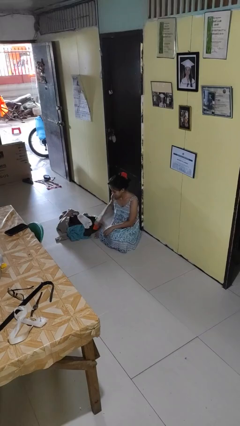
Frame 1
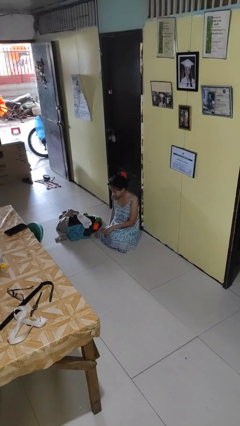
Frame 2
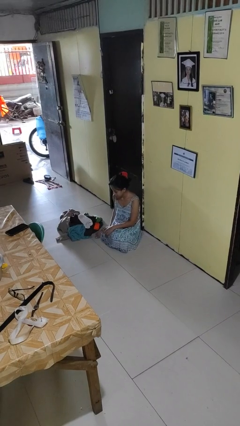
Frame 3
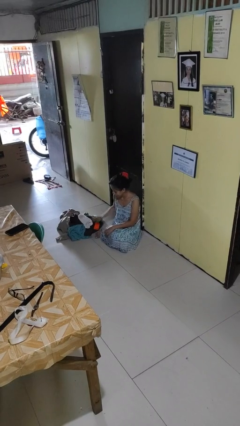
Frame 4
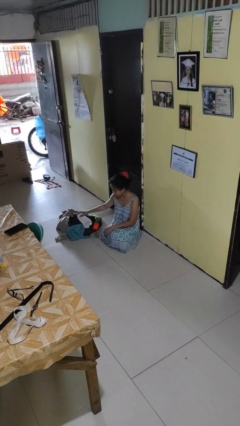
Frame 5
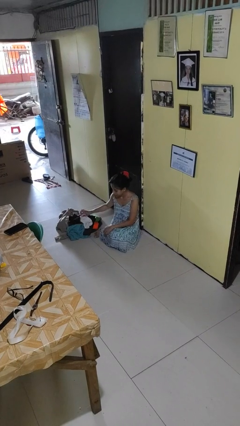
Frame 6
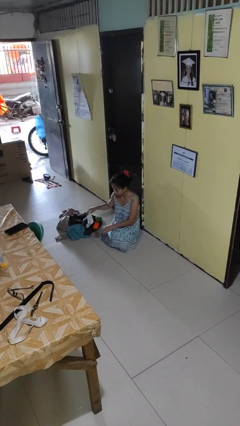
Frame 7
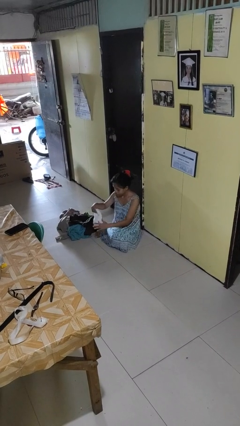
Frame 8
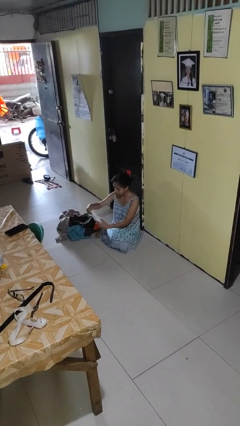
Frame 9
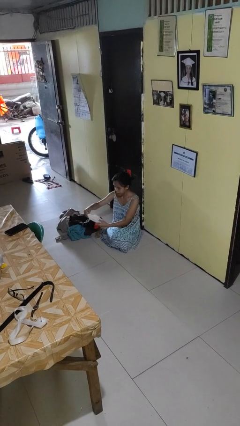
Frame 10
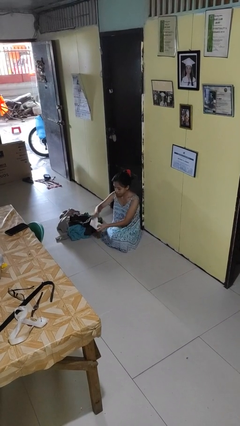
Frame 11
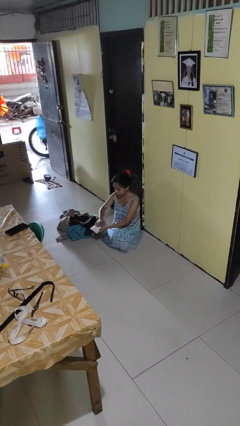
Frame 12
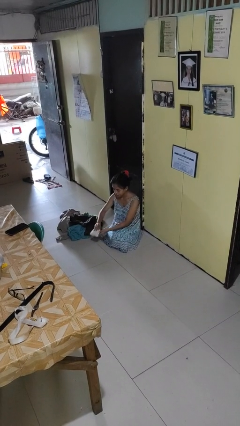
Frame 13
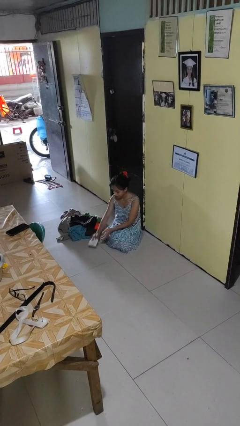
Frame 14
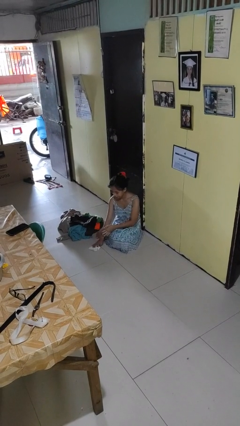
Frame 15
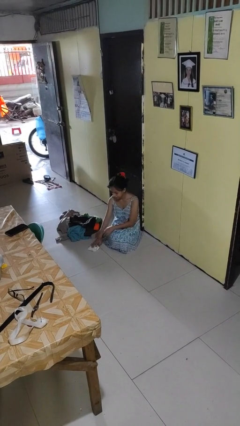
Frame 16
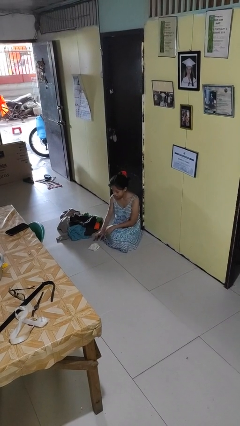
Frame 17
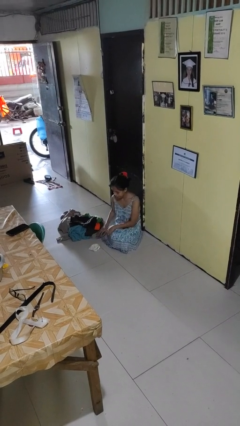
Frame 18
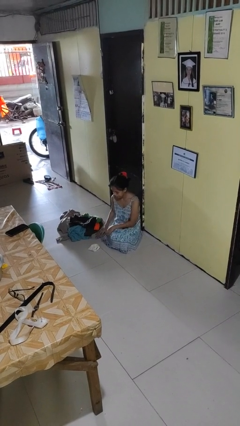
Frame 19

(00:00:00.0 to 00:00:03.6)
person folds socks

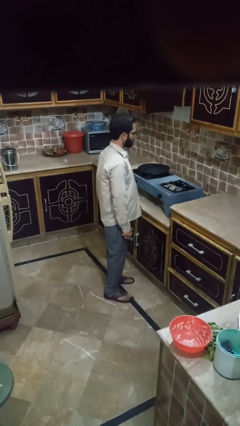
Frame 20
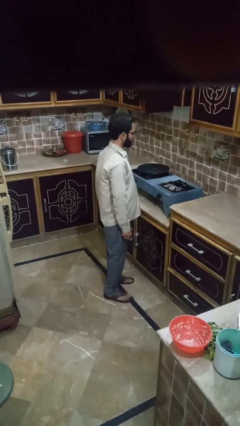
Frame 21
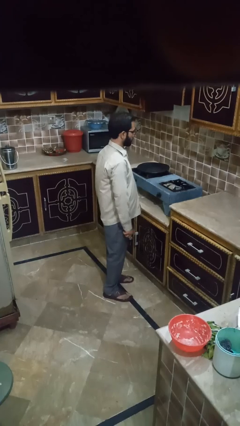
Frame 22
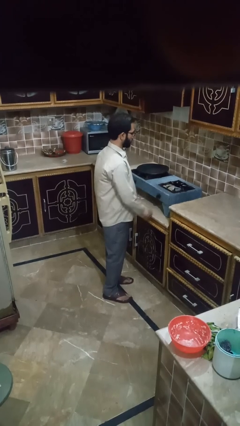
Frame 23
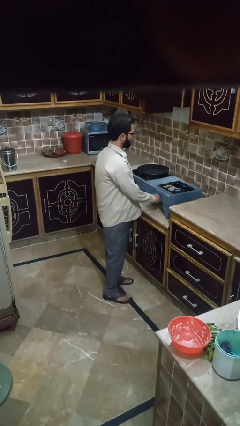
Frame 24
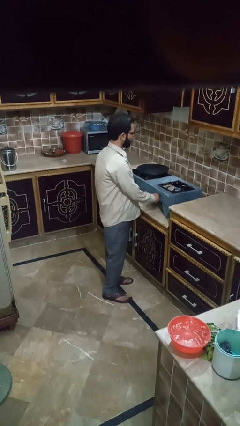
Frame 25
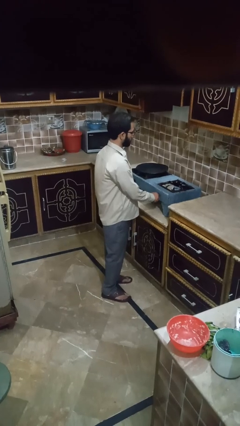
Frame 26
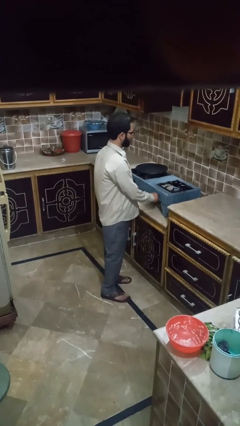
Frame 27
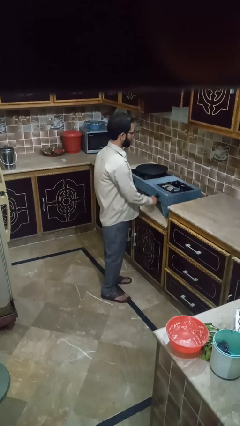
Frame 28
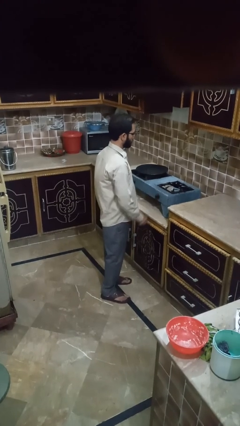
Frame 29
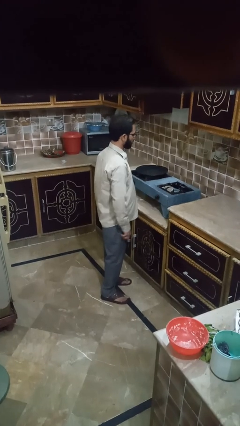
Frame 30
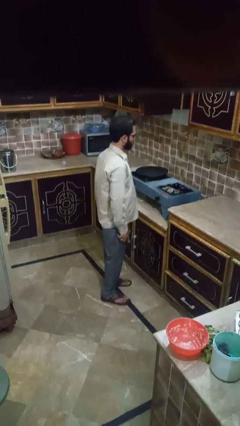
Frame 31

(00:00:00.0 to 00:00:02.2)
person turns on stovetop

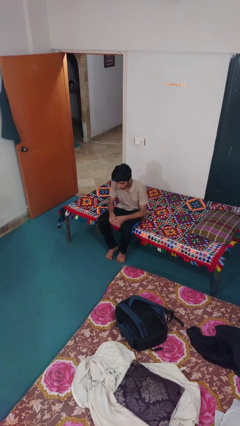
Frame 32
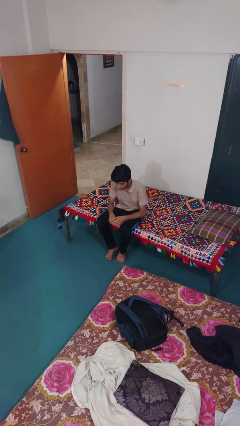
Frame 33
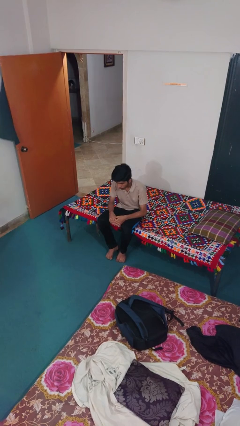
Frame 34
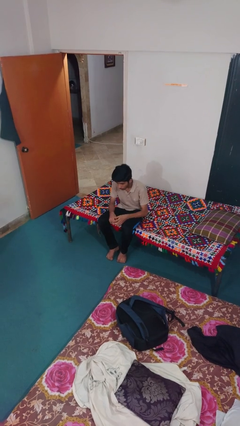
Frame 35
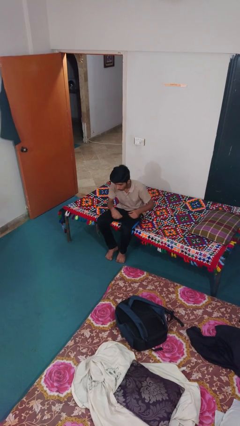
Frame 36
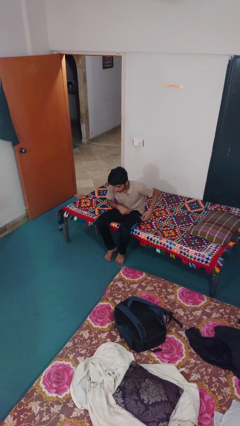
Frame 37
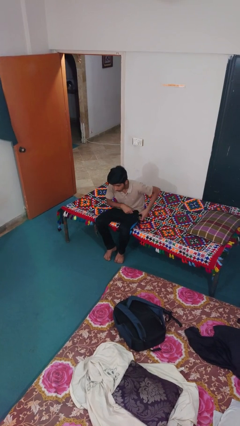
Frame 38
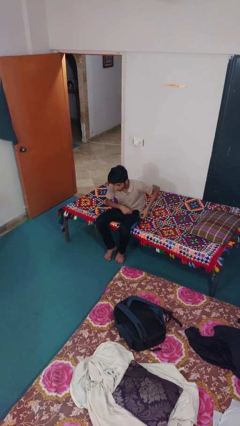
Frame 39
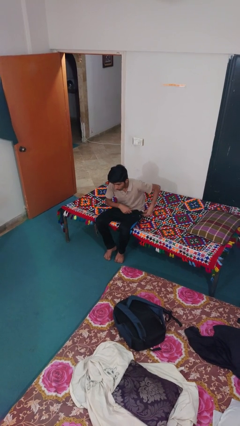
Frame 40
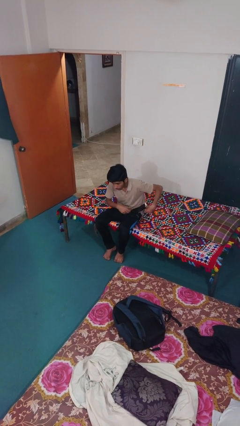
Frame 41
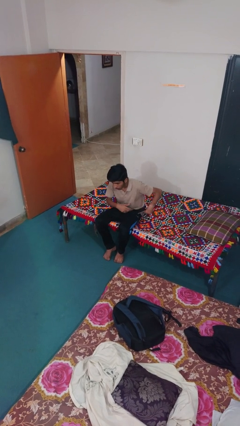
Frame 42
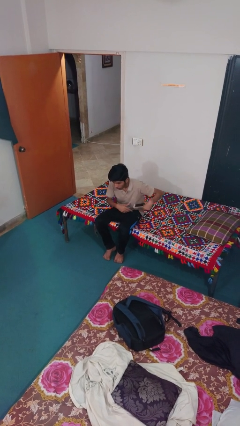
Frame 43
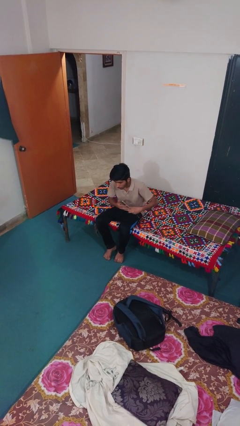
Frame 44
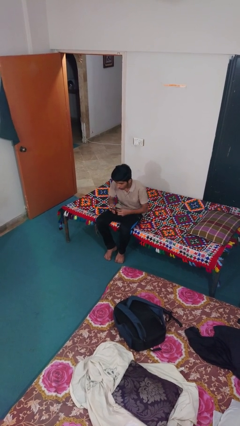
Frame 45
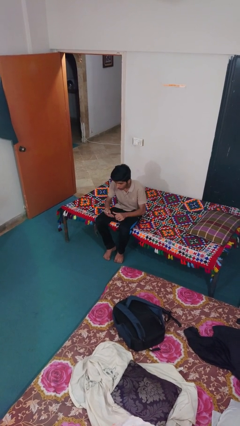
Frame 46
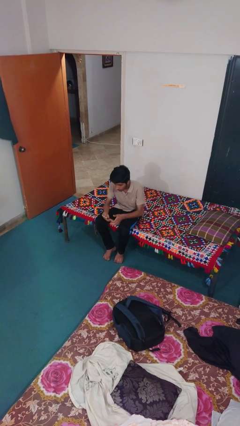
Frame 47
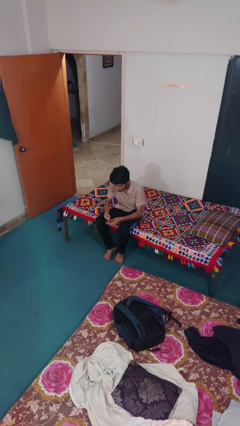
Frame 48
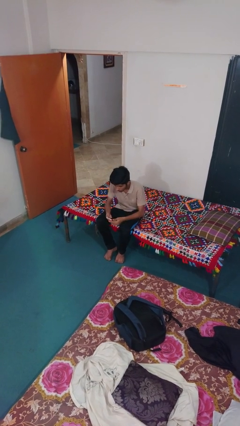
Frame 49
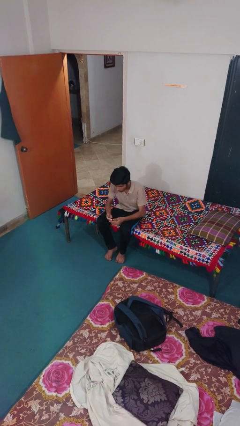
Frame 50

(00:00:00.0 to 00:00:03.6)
person takes phone from pocket

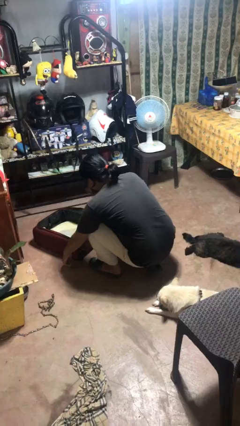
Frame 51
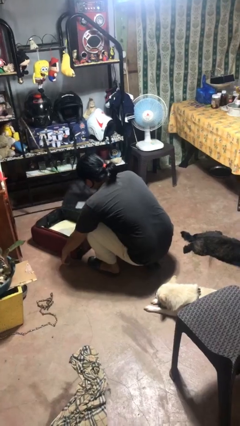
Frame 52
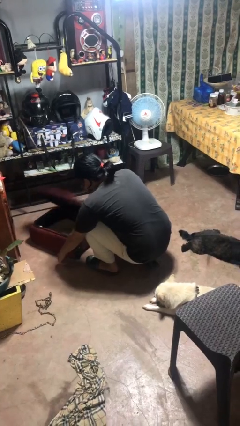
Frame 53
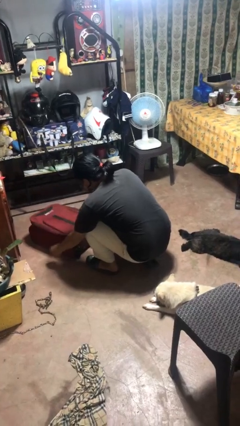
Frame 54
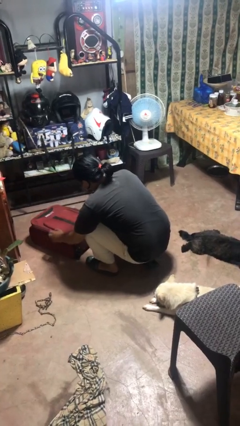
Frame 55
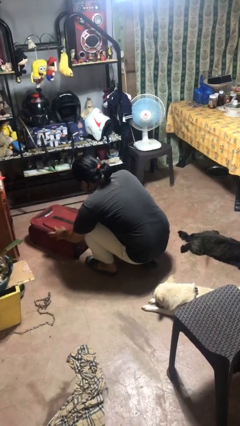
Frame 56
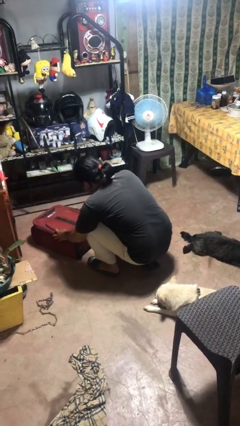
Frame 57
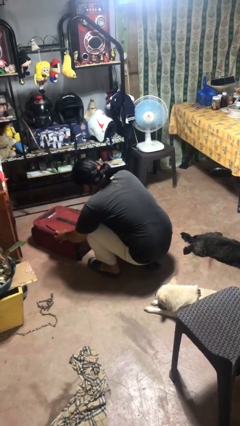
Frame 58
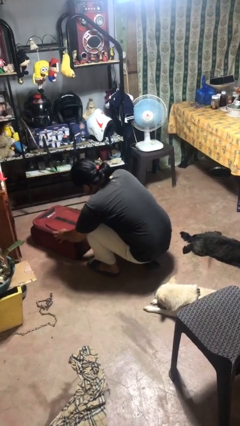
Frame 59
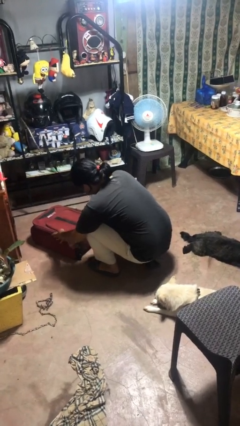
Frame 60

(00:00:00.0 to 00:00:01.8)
person closes suitcase

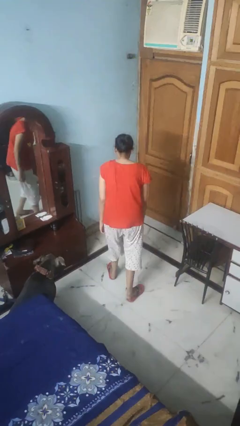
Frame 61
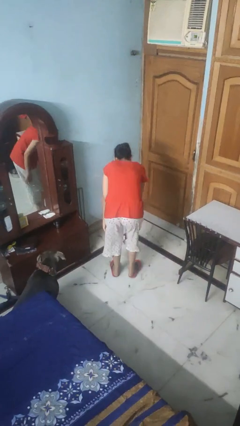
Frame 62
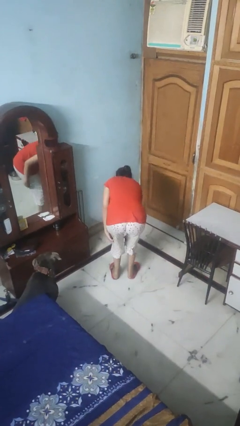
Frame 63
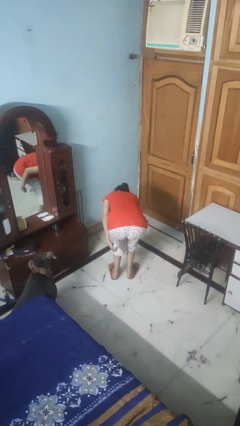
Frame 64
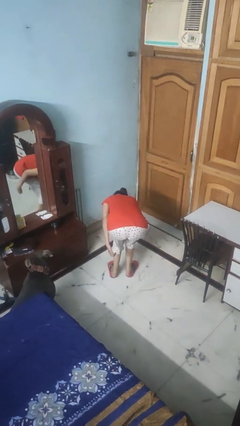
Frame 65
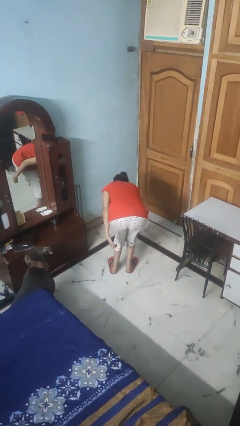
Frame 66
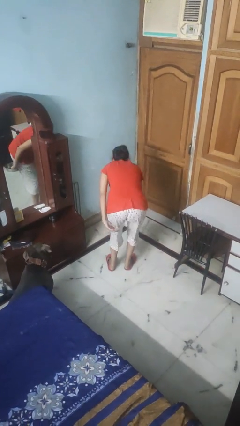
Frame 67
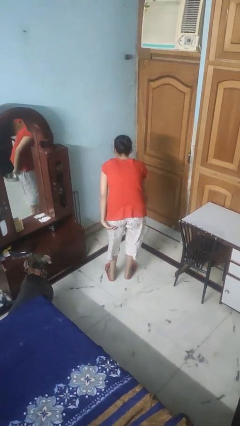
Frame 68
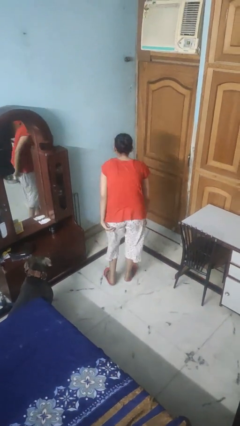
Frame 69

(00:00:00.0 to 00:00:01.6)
person picks up object from floor

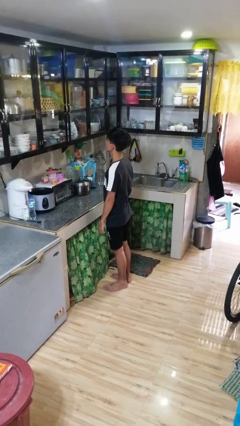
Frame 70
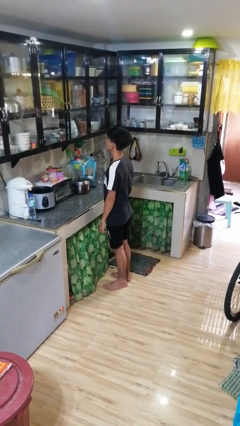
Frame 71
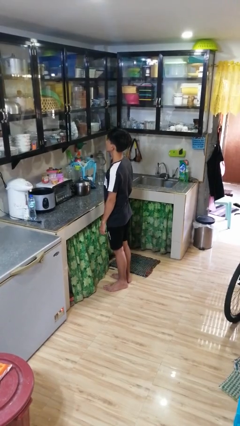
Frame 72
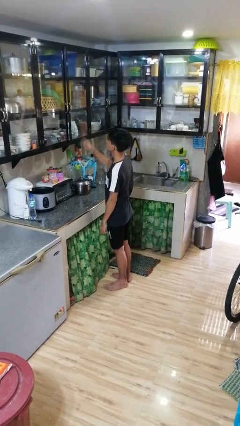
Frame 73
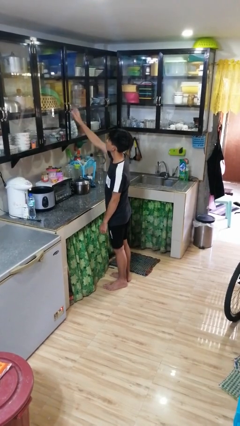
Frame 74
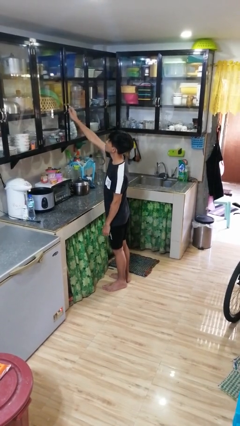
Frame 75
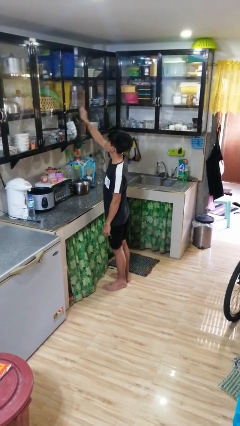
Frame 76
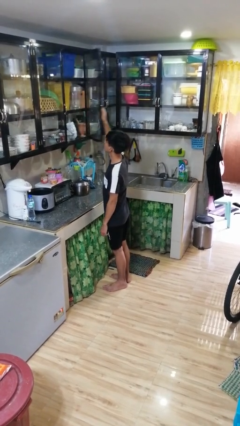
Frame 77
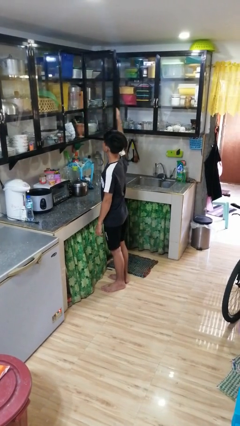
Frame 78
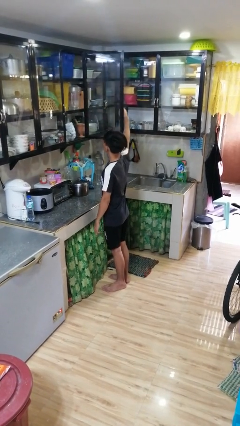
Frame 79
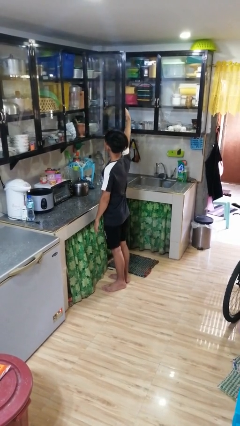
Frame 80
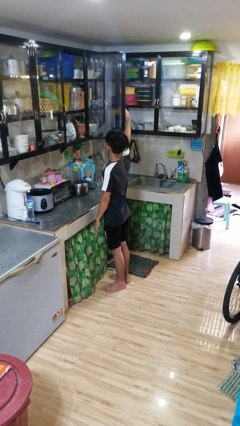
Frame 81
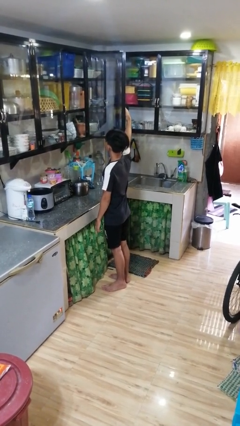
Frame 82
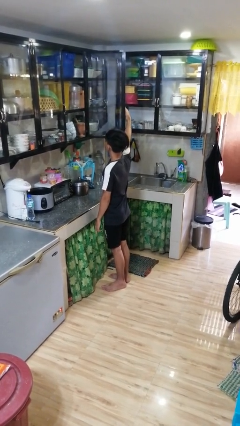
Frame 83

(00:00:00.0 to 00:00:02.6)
person opens cabinet

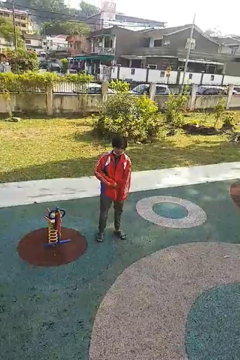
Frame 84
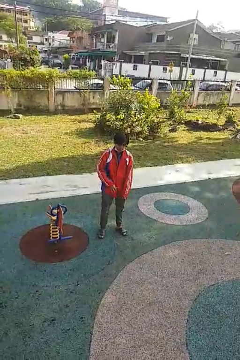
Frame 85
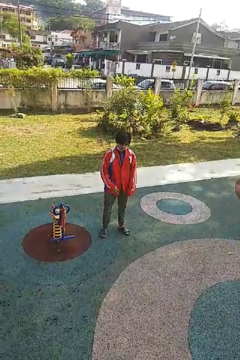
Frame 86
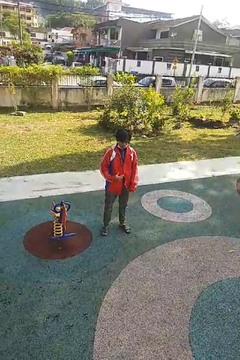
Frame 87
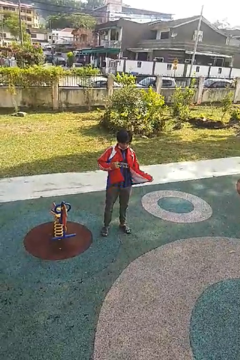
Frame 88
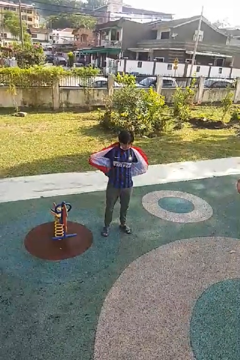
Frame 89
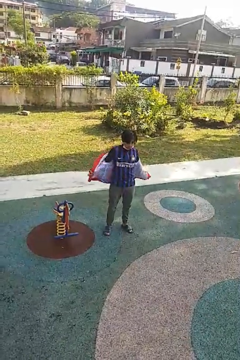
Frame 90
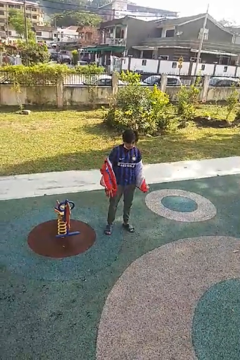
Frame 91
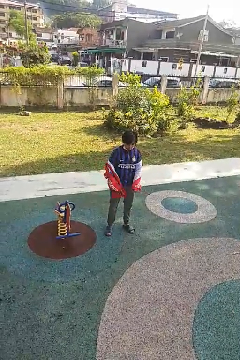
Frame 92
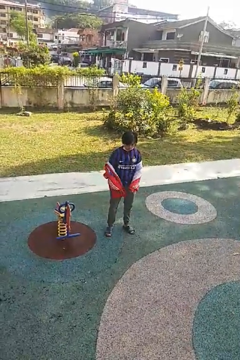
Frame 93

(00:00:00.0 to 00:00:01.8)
person takes off jacket
